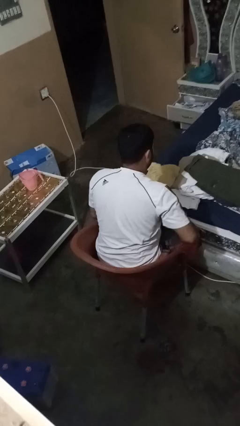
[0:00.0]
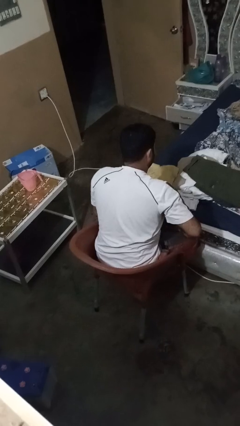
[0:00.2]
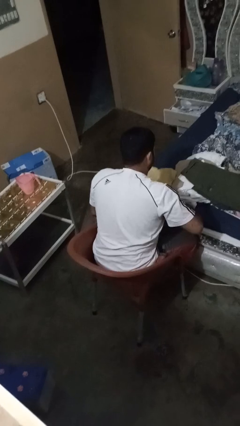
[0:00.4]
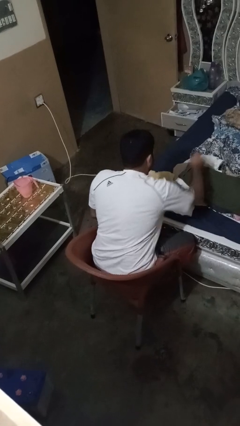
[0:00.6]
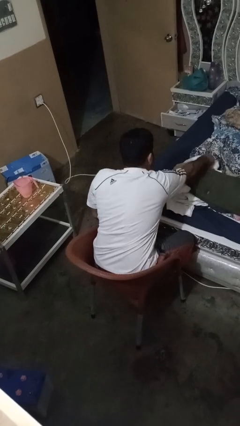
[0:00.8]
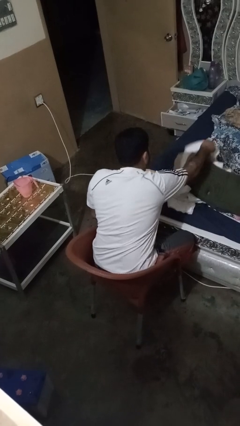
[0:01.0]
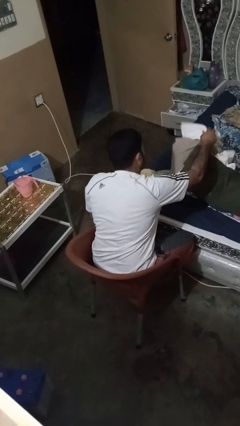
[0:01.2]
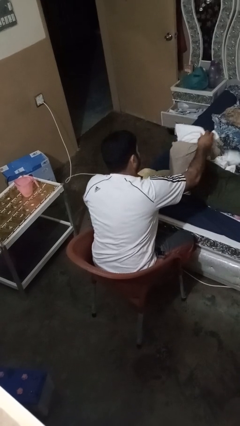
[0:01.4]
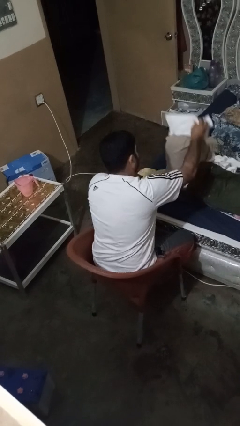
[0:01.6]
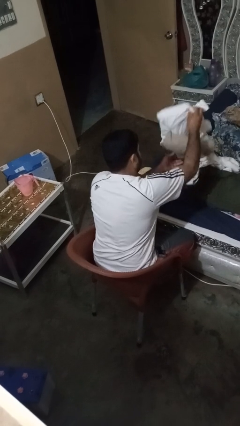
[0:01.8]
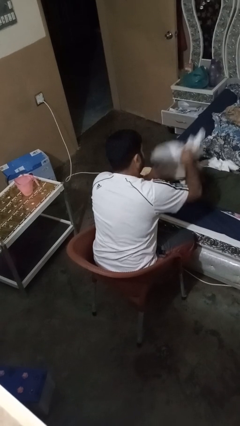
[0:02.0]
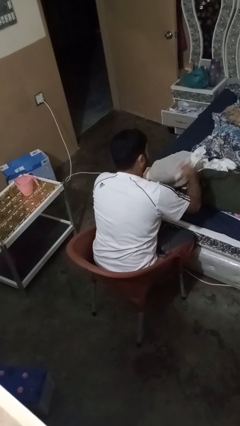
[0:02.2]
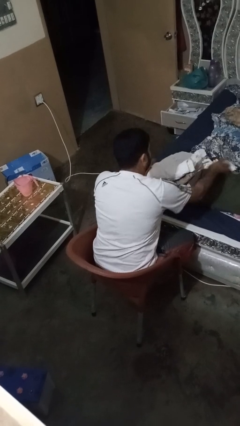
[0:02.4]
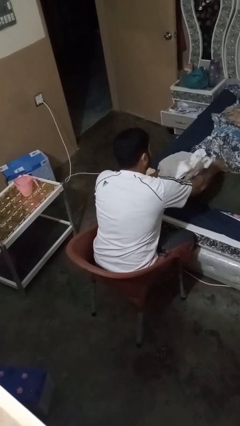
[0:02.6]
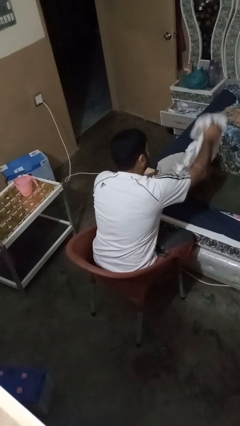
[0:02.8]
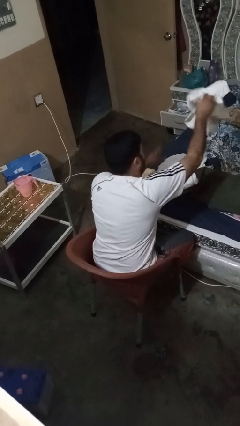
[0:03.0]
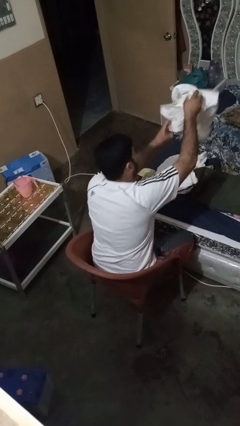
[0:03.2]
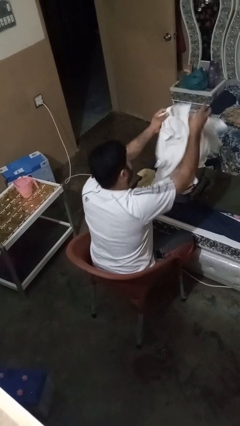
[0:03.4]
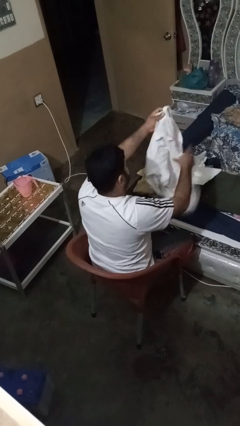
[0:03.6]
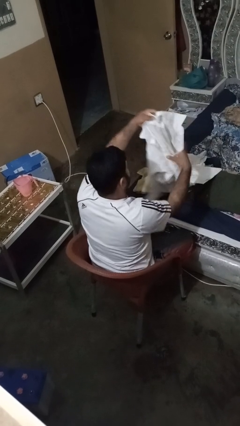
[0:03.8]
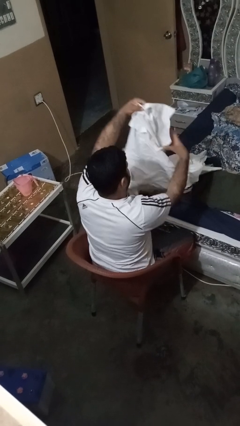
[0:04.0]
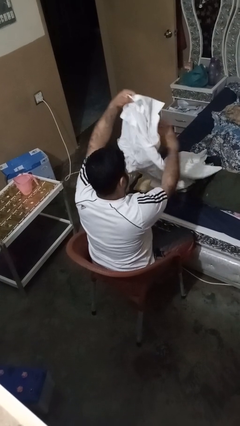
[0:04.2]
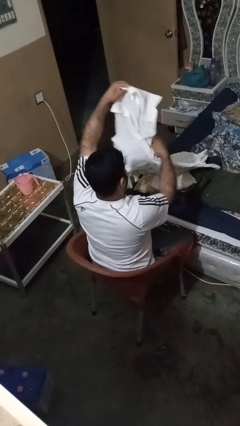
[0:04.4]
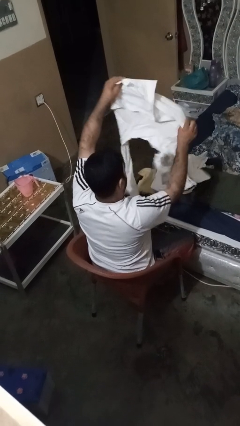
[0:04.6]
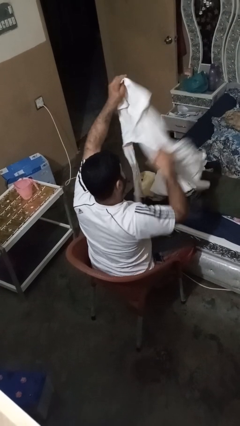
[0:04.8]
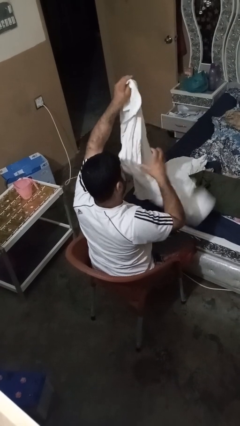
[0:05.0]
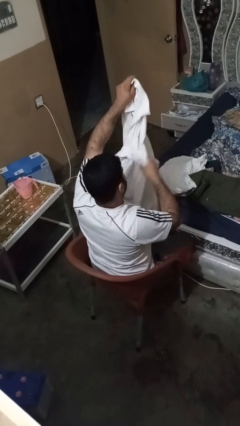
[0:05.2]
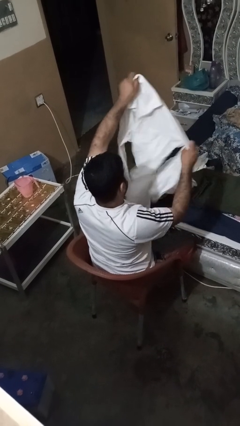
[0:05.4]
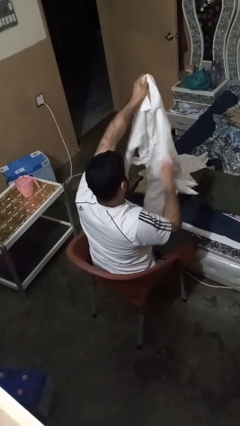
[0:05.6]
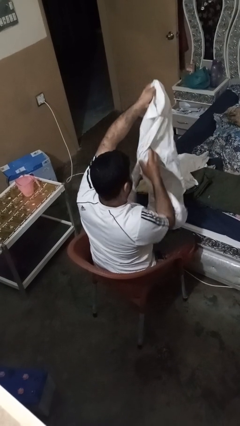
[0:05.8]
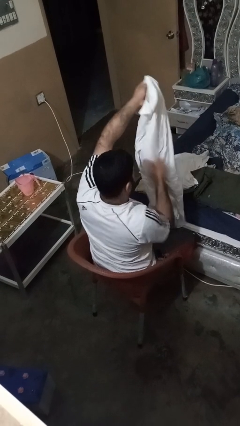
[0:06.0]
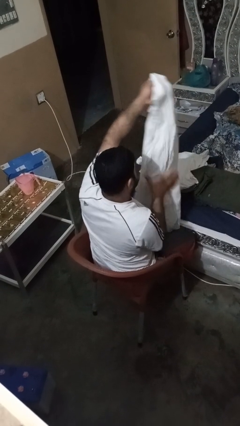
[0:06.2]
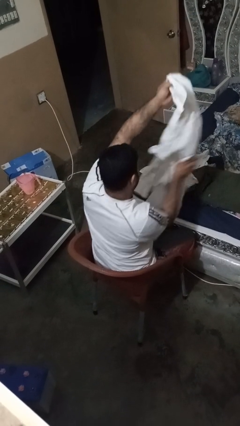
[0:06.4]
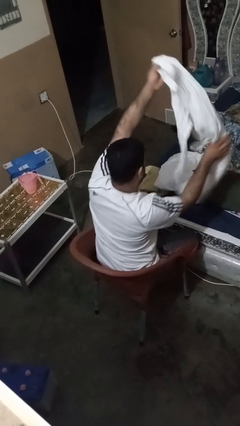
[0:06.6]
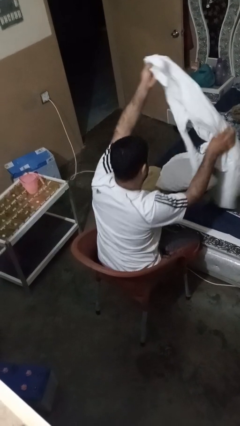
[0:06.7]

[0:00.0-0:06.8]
person folds shirt

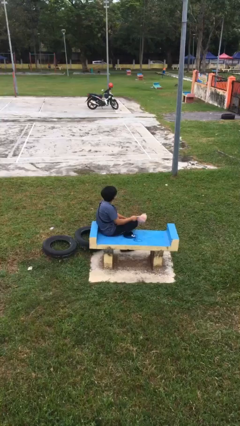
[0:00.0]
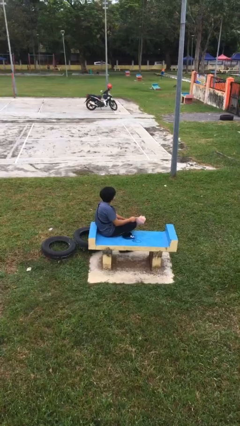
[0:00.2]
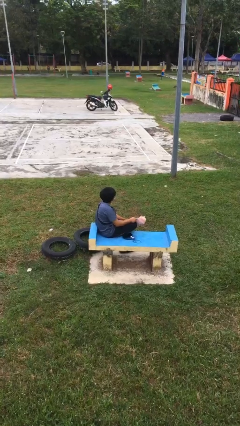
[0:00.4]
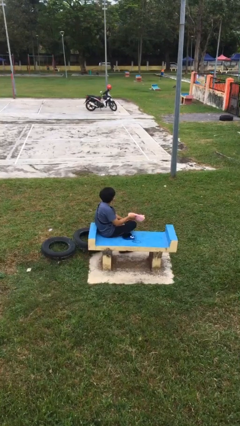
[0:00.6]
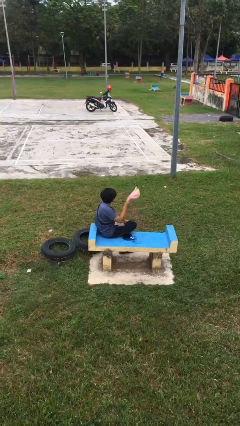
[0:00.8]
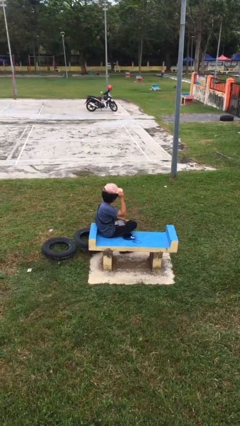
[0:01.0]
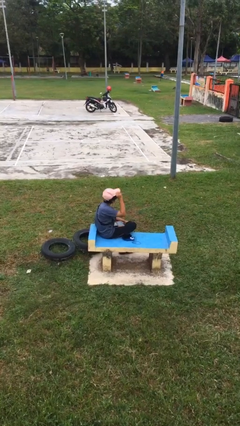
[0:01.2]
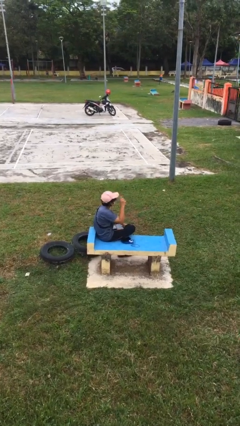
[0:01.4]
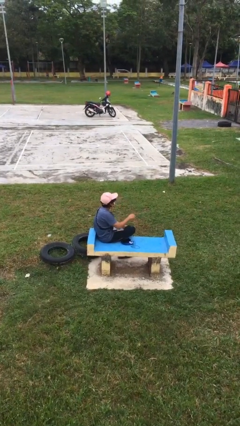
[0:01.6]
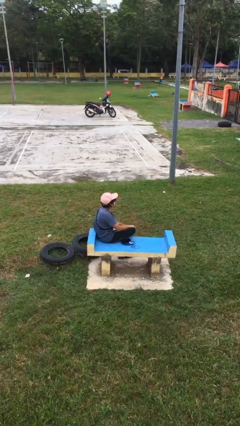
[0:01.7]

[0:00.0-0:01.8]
person puts on hat

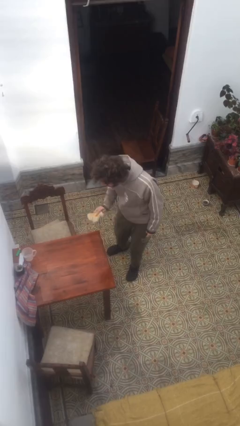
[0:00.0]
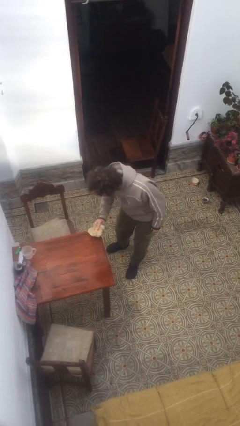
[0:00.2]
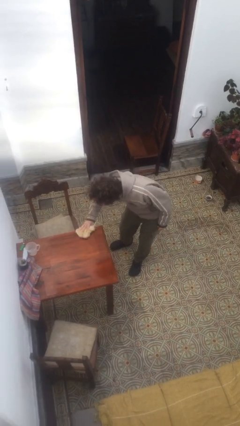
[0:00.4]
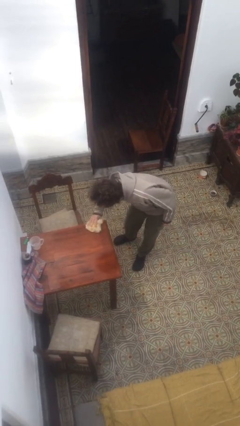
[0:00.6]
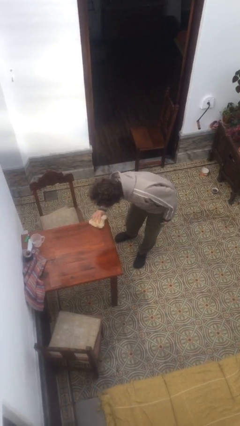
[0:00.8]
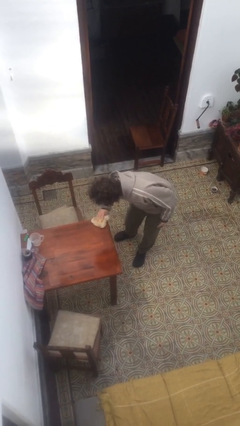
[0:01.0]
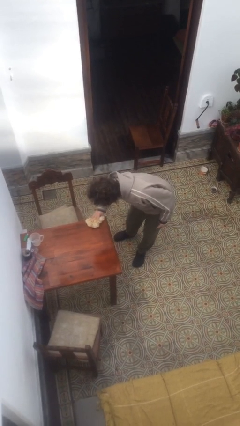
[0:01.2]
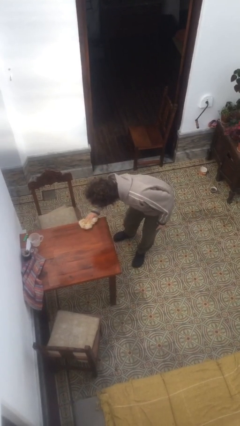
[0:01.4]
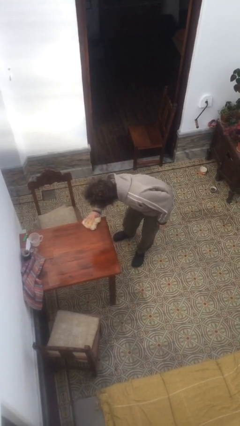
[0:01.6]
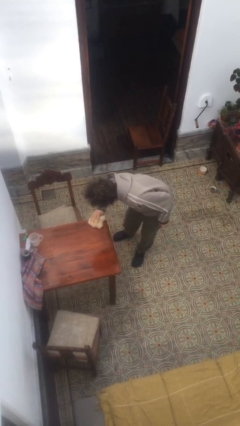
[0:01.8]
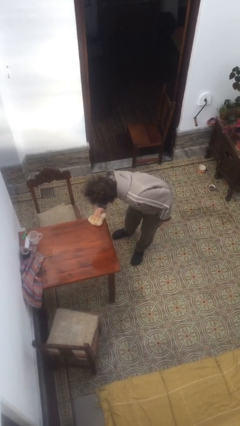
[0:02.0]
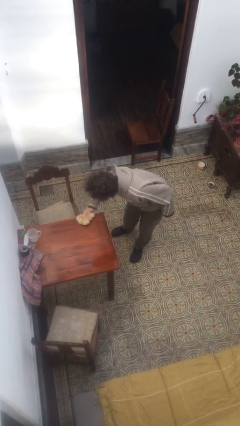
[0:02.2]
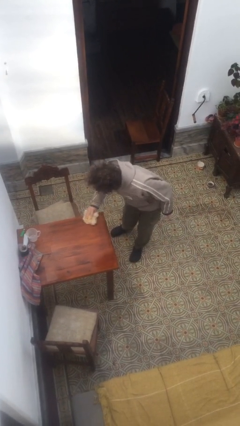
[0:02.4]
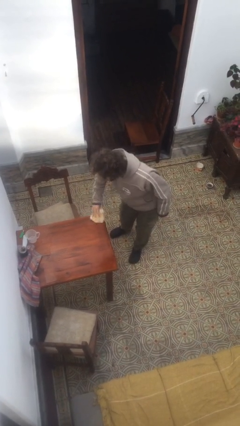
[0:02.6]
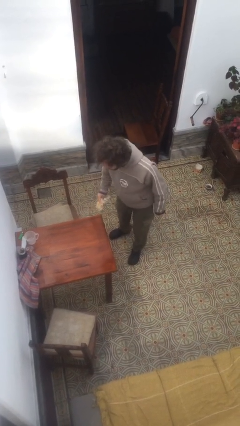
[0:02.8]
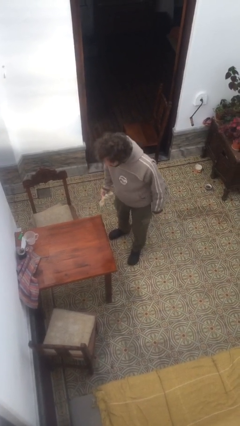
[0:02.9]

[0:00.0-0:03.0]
person cleans table with rag

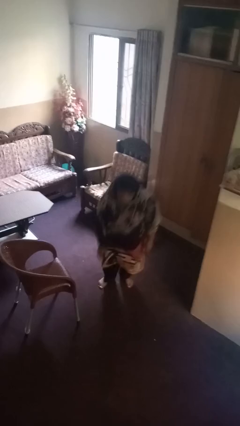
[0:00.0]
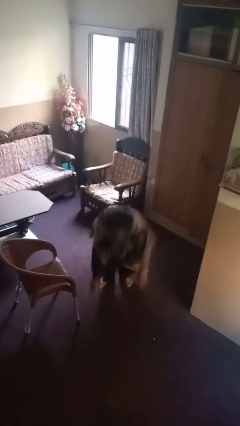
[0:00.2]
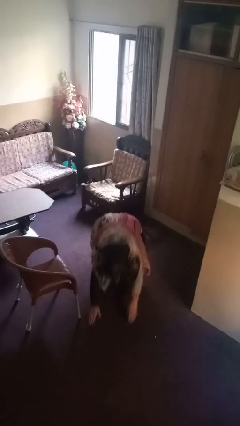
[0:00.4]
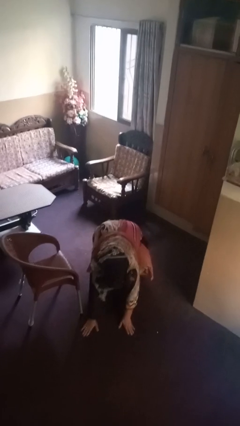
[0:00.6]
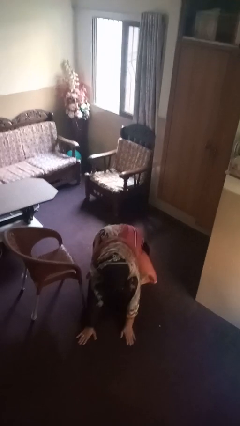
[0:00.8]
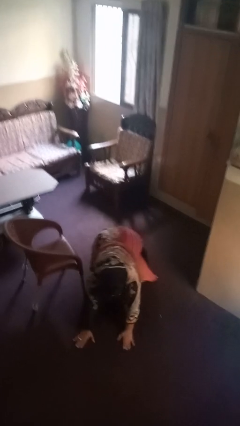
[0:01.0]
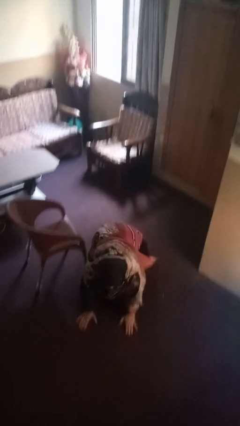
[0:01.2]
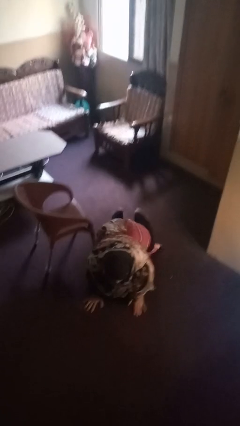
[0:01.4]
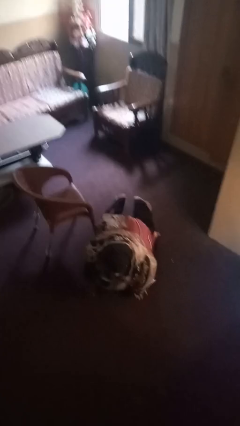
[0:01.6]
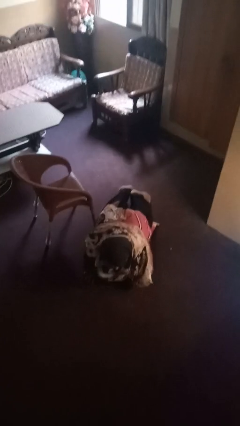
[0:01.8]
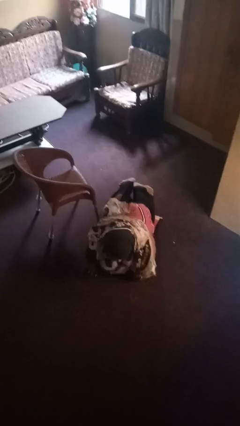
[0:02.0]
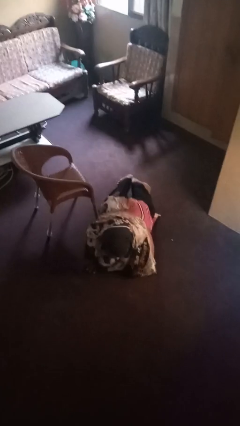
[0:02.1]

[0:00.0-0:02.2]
person lies down on floor

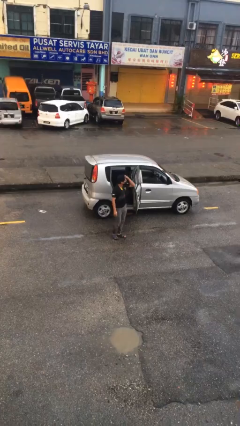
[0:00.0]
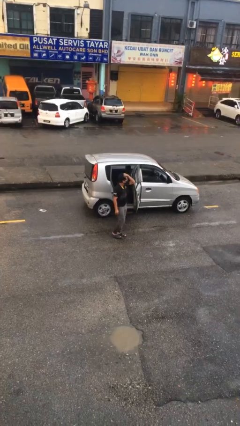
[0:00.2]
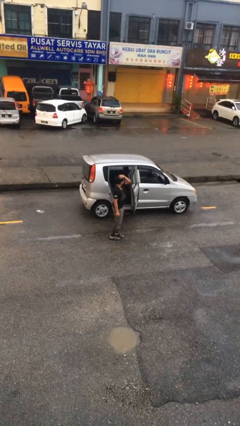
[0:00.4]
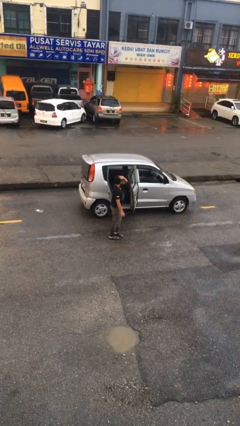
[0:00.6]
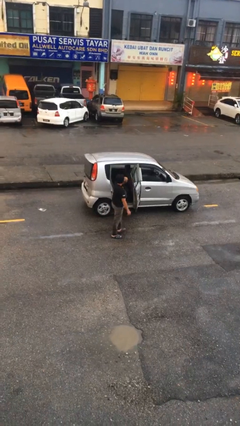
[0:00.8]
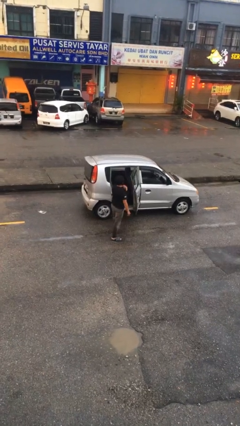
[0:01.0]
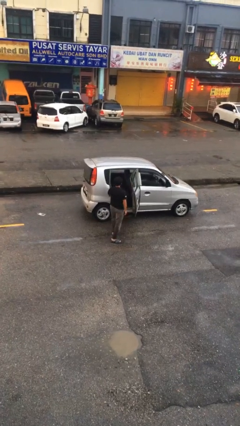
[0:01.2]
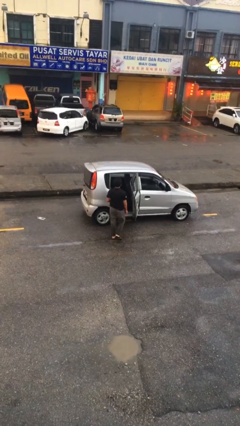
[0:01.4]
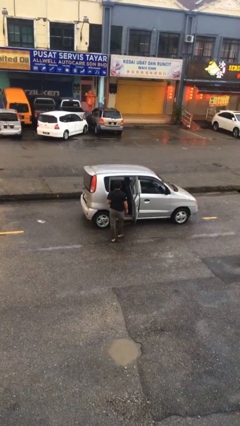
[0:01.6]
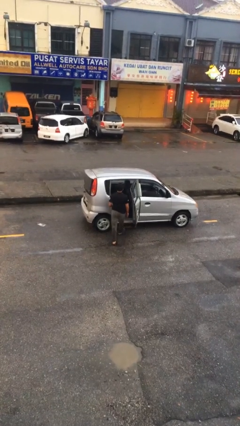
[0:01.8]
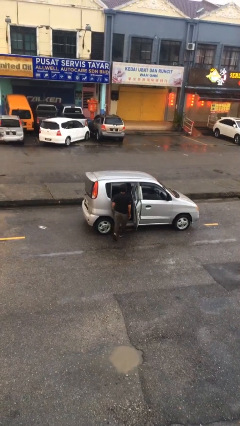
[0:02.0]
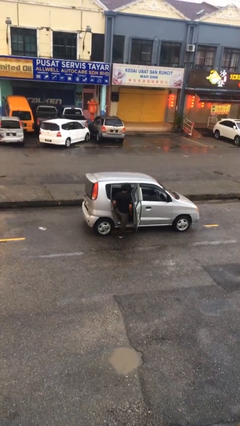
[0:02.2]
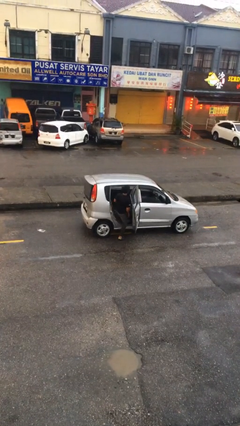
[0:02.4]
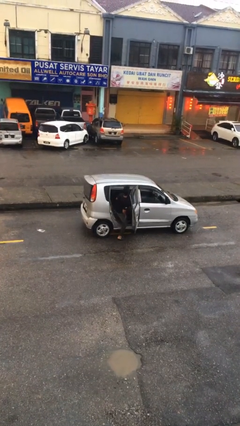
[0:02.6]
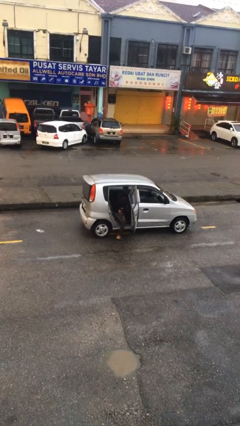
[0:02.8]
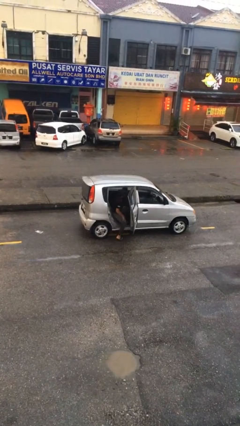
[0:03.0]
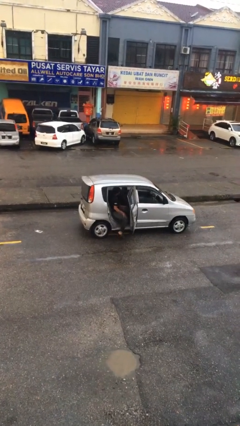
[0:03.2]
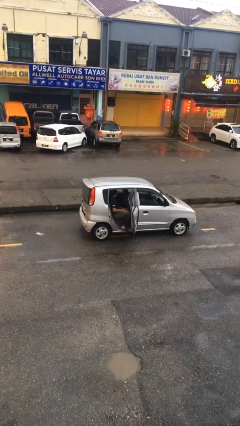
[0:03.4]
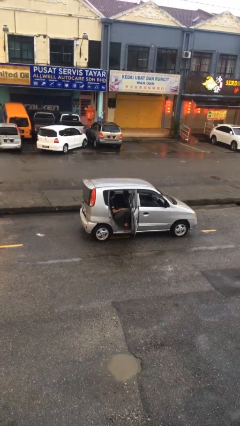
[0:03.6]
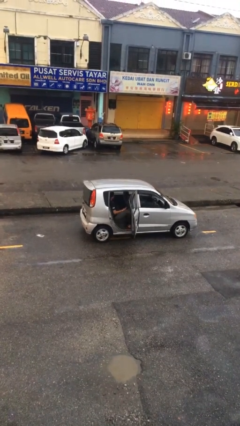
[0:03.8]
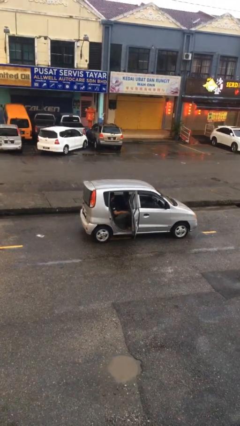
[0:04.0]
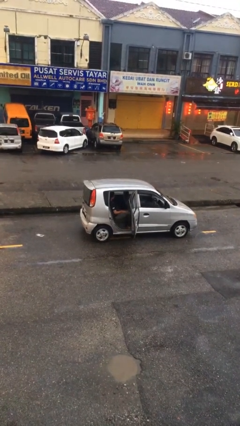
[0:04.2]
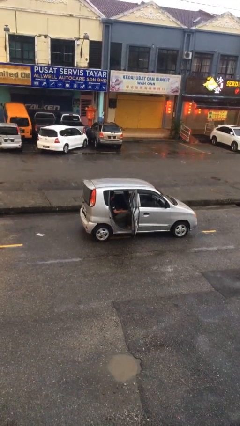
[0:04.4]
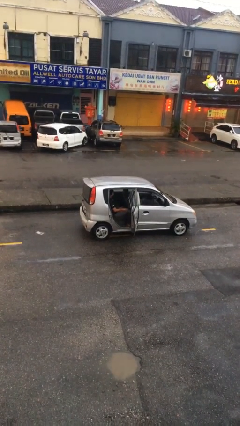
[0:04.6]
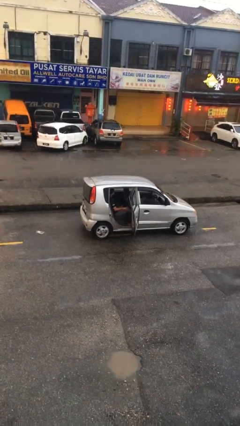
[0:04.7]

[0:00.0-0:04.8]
person enters car
